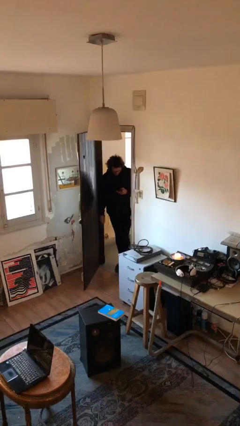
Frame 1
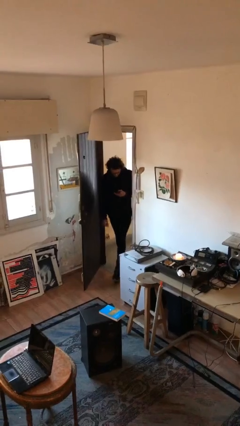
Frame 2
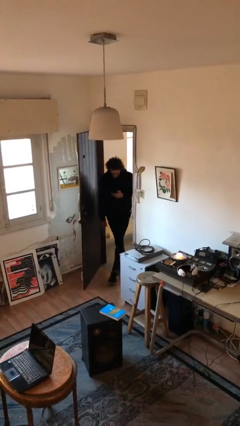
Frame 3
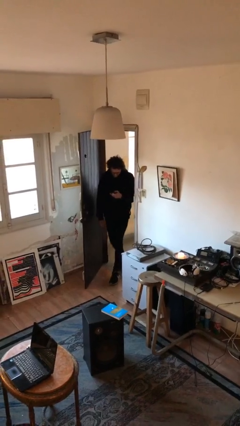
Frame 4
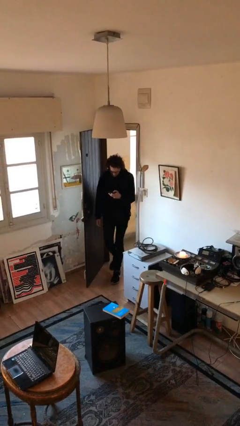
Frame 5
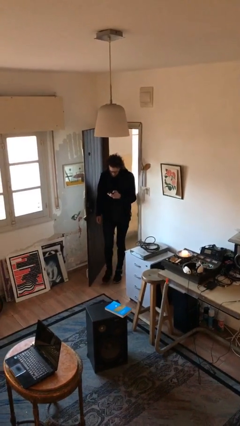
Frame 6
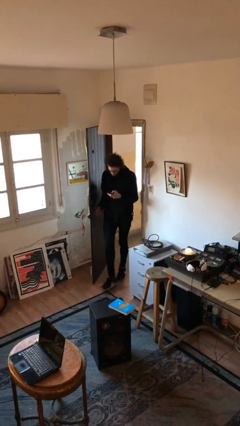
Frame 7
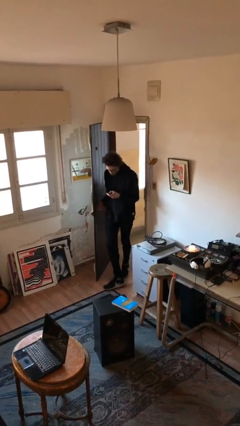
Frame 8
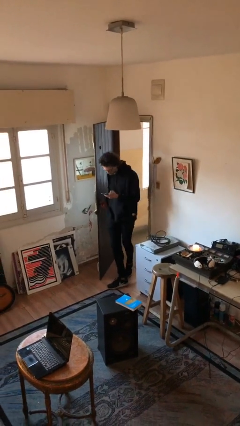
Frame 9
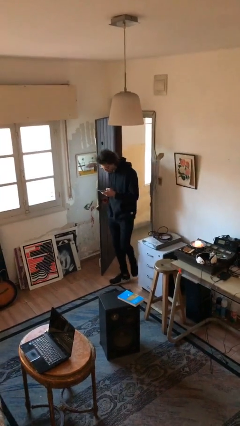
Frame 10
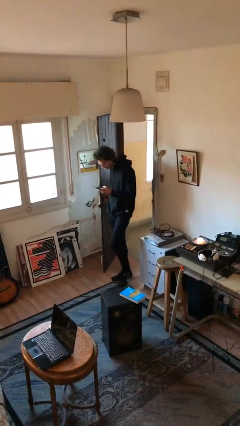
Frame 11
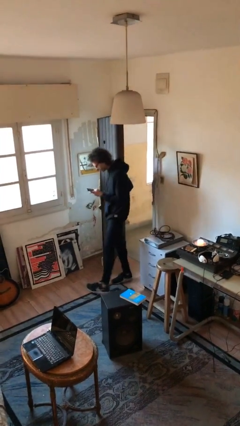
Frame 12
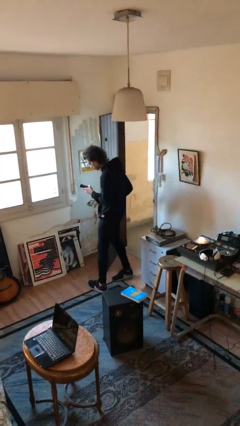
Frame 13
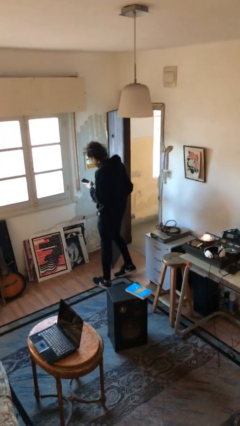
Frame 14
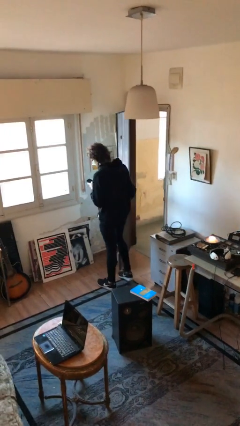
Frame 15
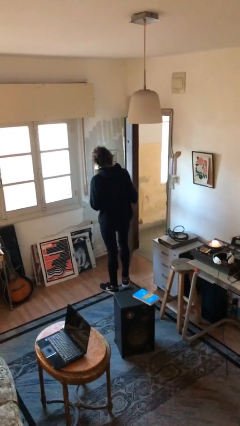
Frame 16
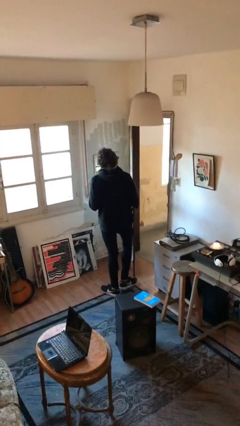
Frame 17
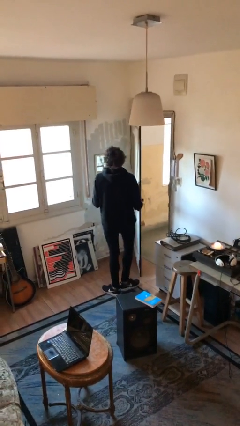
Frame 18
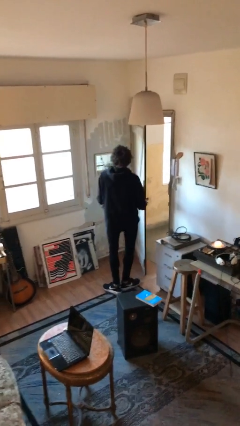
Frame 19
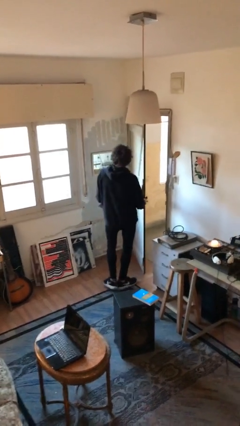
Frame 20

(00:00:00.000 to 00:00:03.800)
person enters scene through structure

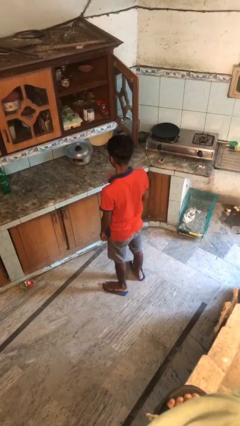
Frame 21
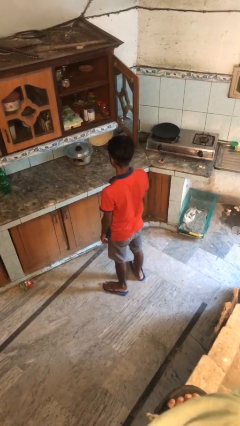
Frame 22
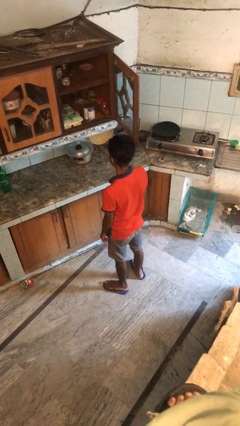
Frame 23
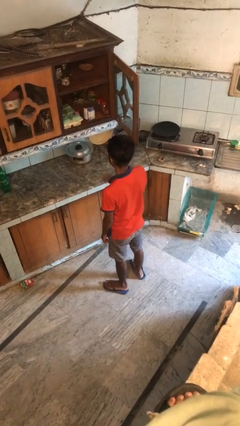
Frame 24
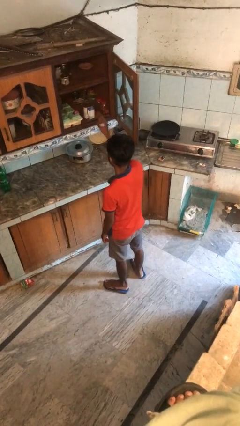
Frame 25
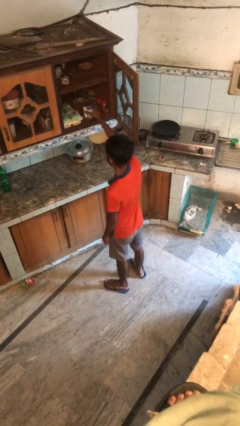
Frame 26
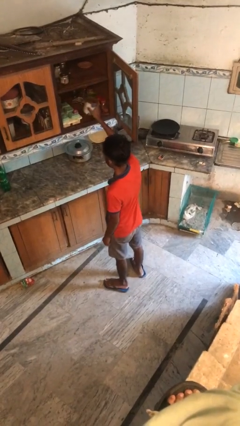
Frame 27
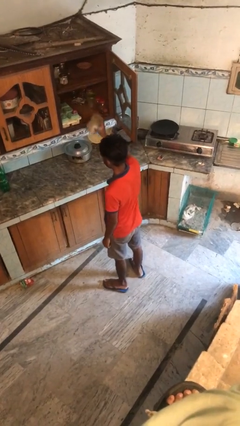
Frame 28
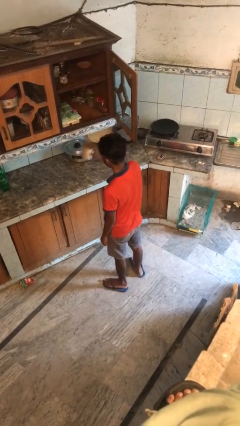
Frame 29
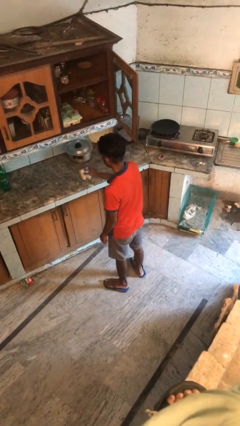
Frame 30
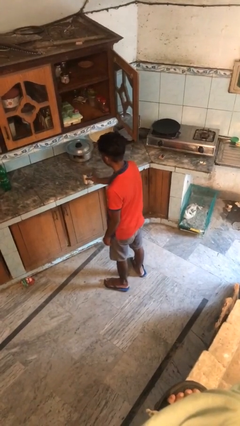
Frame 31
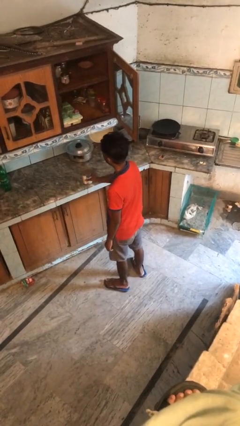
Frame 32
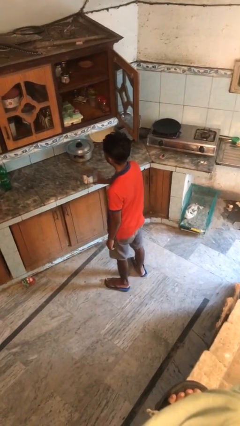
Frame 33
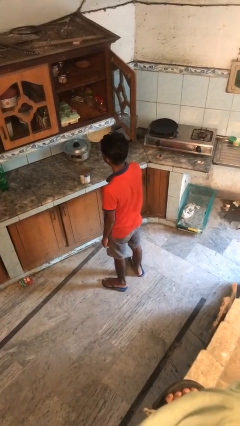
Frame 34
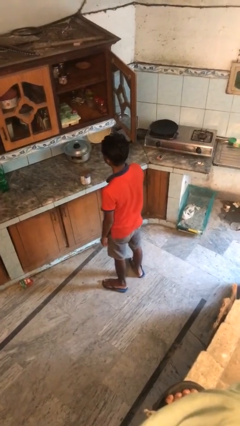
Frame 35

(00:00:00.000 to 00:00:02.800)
person takes object from cabinet

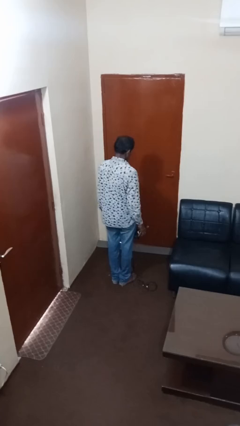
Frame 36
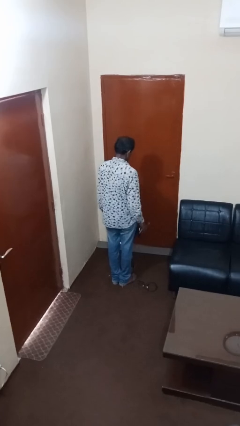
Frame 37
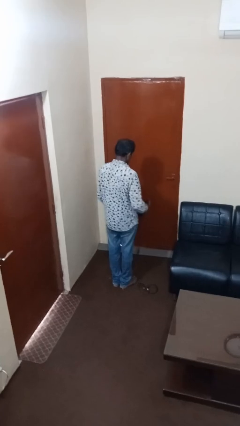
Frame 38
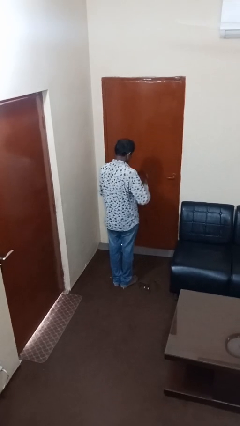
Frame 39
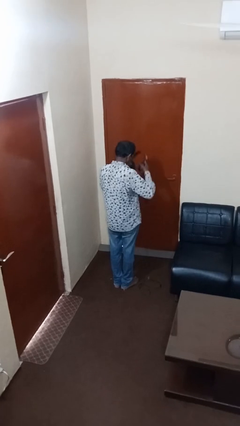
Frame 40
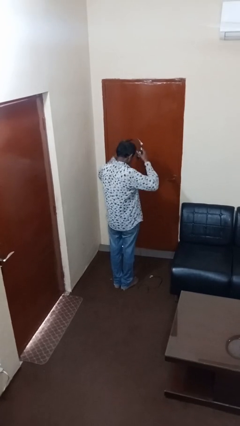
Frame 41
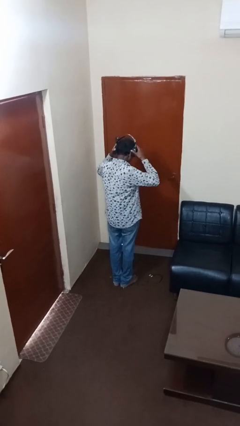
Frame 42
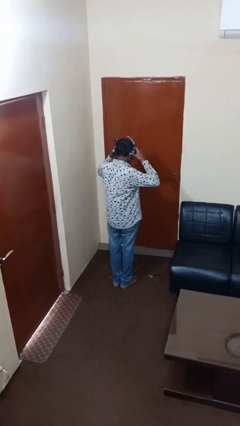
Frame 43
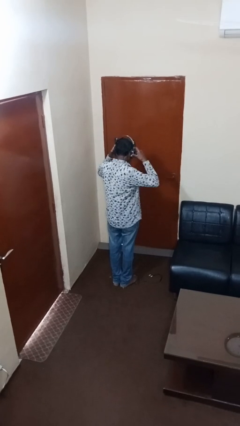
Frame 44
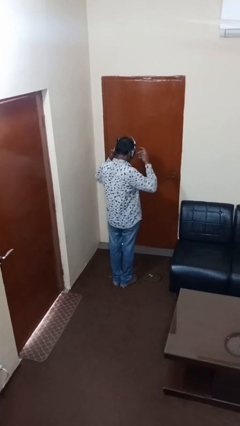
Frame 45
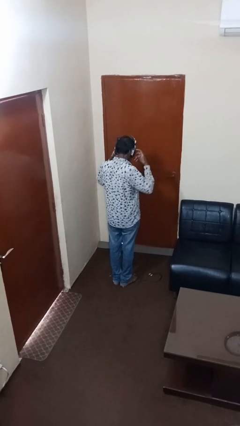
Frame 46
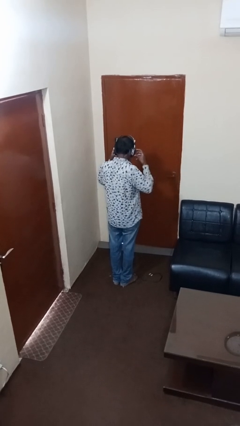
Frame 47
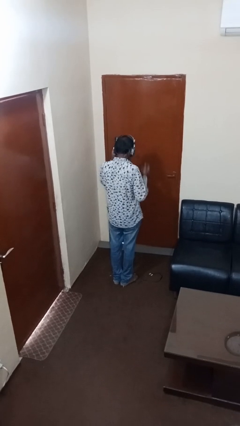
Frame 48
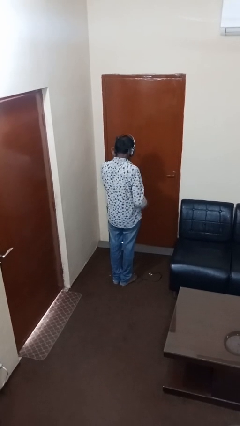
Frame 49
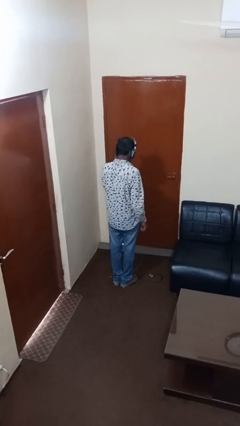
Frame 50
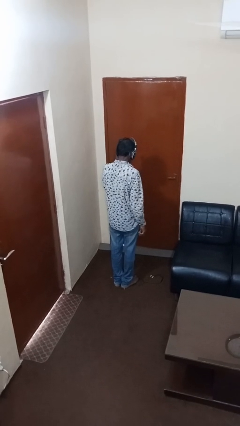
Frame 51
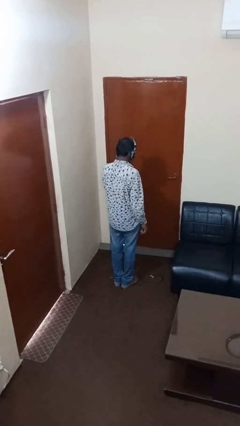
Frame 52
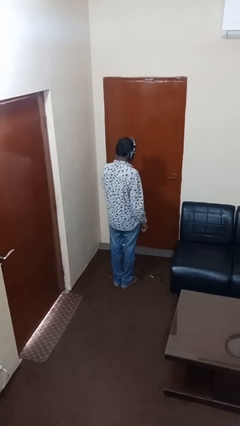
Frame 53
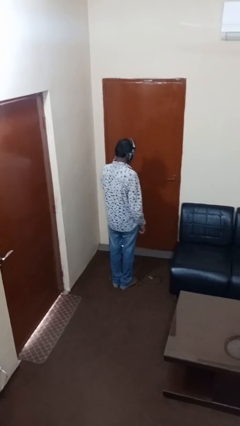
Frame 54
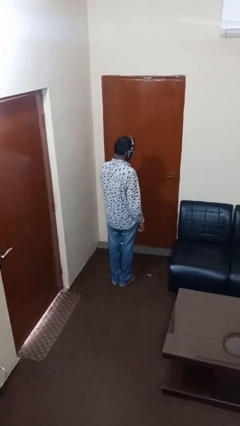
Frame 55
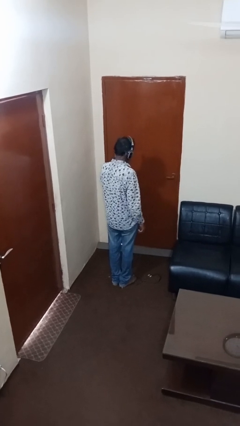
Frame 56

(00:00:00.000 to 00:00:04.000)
person puts on headphones

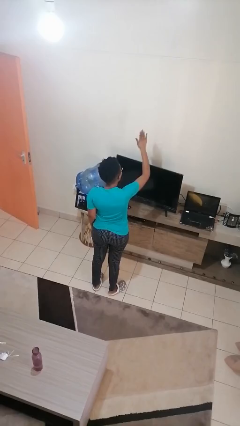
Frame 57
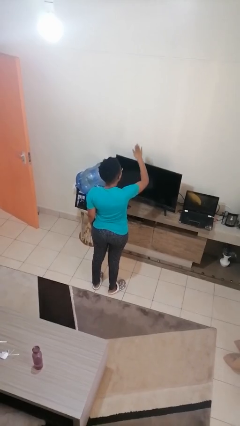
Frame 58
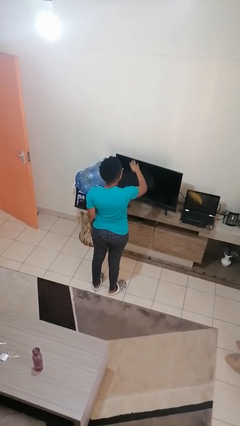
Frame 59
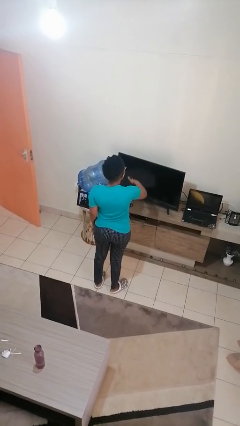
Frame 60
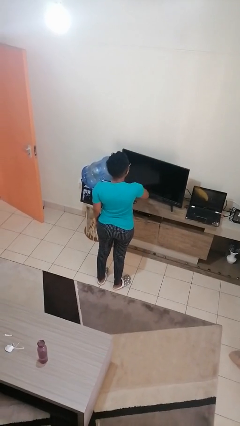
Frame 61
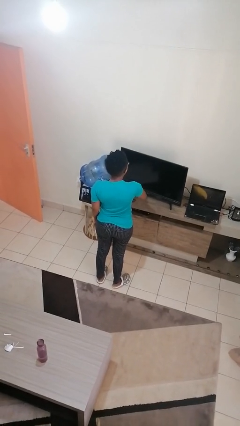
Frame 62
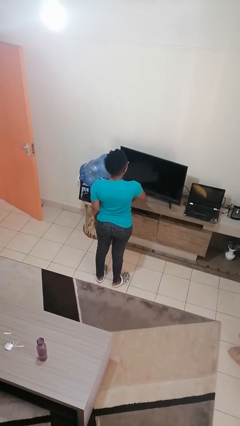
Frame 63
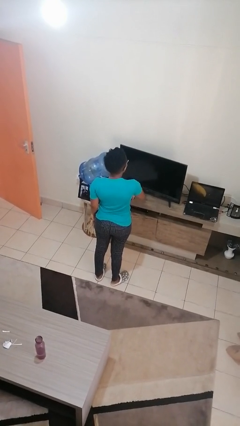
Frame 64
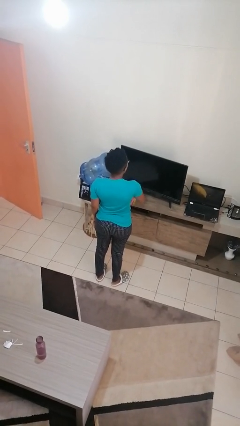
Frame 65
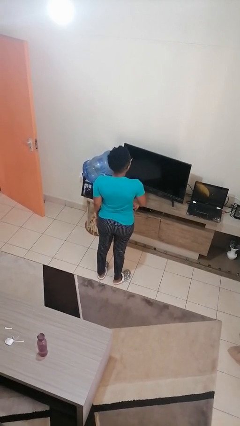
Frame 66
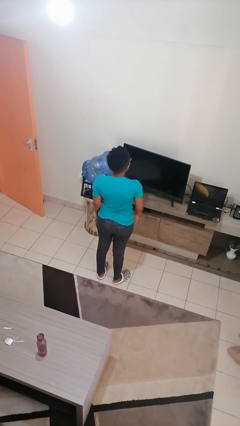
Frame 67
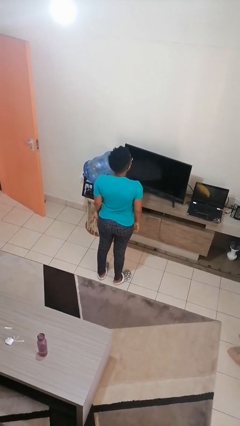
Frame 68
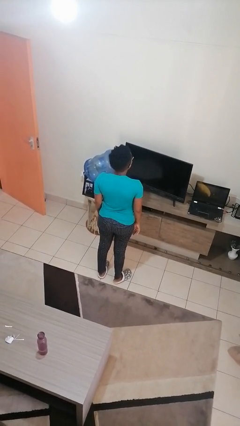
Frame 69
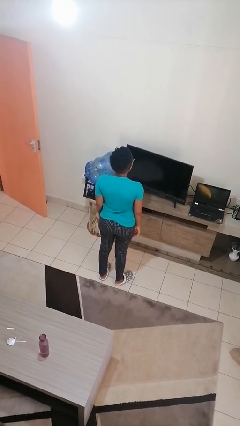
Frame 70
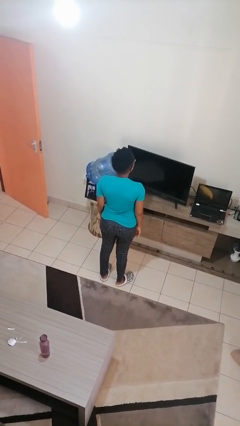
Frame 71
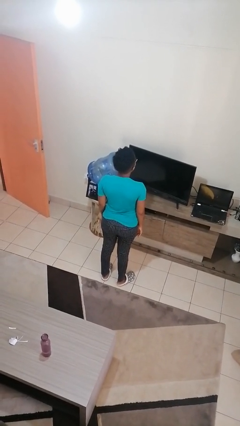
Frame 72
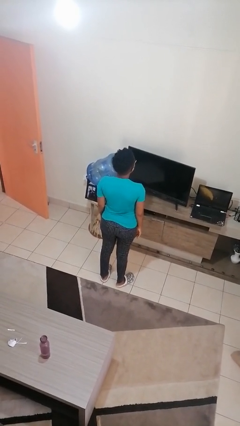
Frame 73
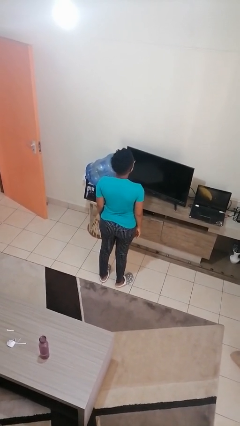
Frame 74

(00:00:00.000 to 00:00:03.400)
person gestures swipe down

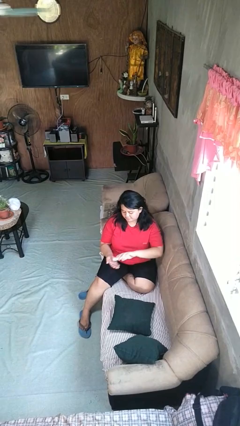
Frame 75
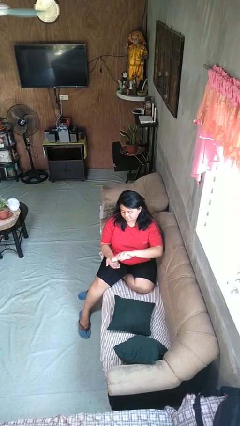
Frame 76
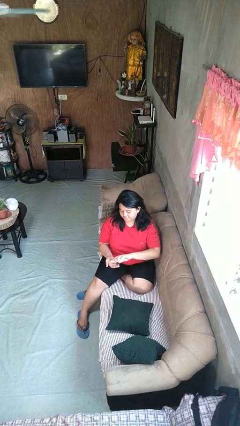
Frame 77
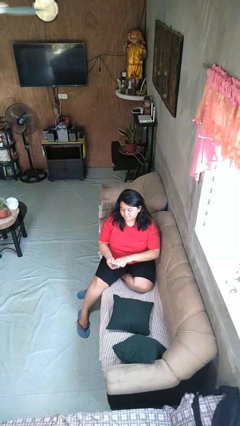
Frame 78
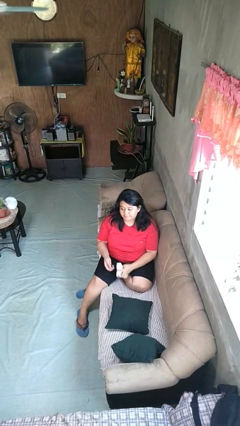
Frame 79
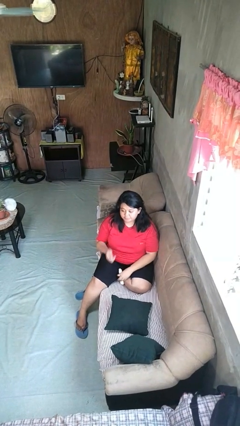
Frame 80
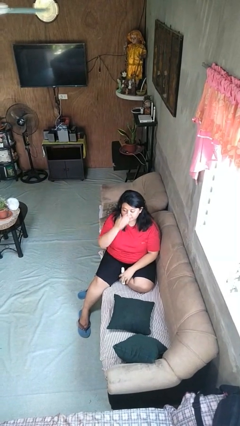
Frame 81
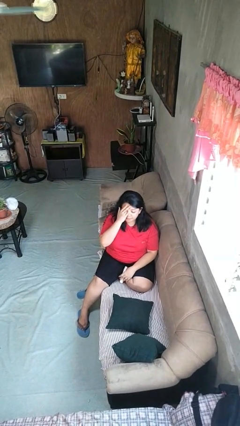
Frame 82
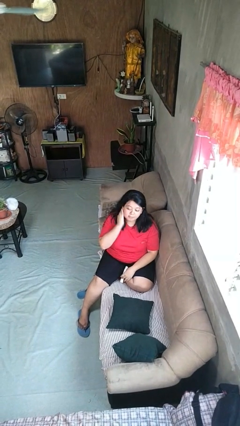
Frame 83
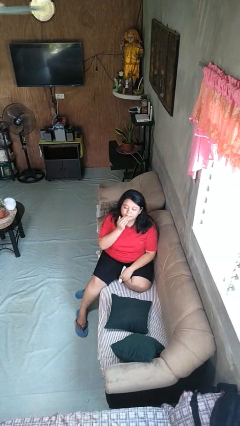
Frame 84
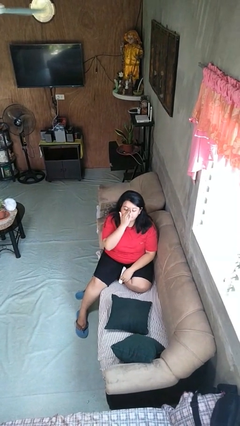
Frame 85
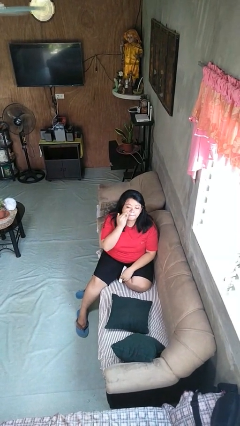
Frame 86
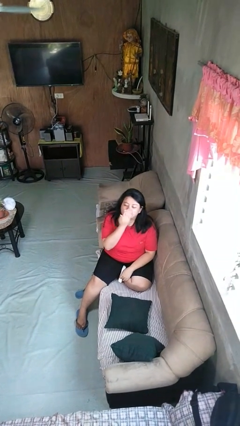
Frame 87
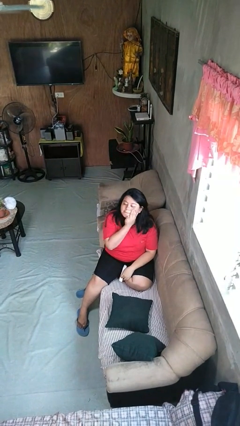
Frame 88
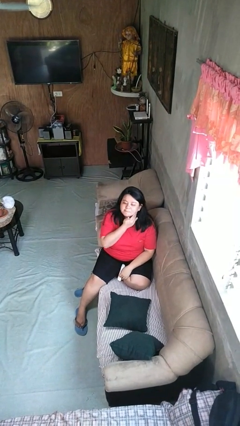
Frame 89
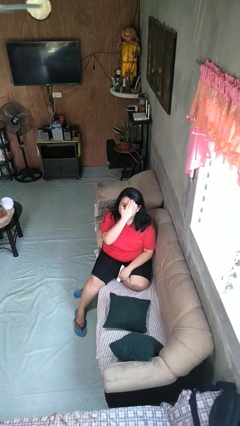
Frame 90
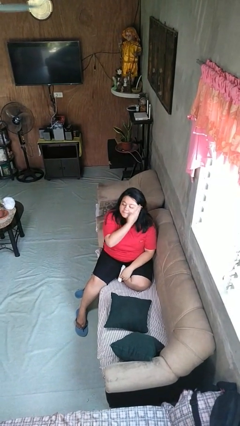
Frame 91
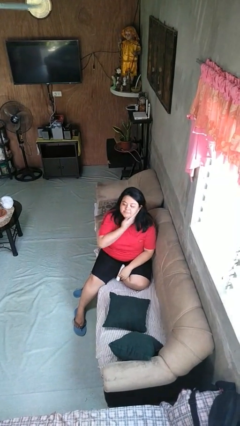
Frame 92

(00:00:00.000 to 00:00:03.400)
person applies facial moisturizer

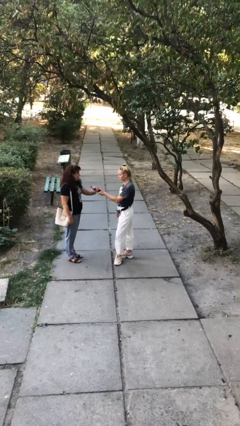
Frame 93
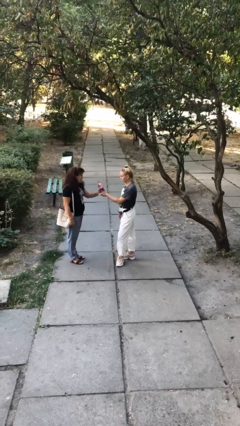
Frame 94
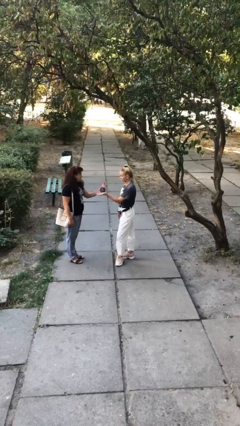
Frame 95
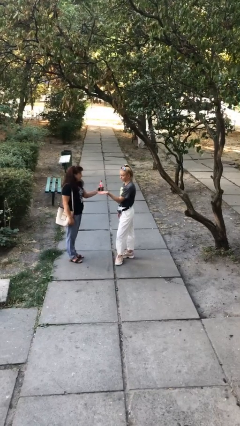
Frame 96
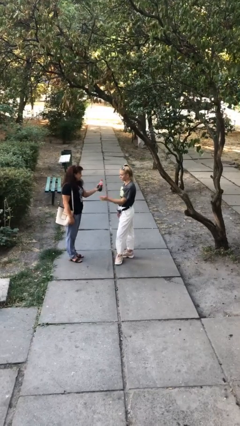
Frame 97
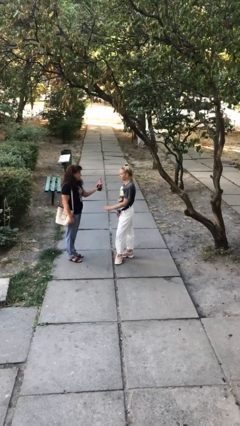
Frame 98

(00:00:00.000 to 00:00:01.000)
person transfers object to person
